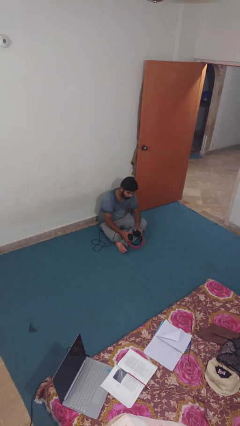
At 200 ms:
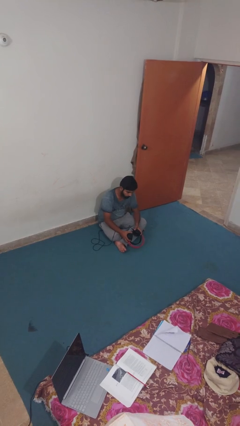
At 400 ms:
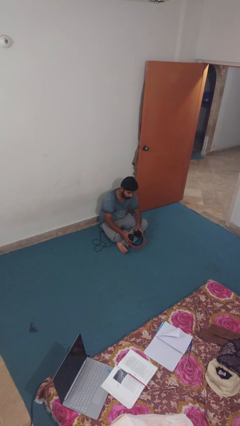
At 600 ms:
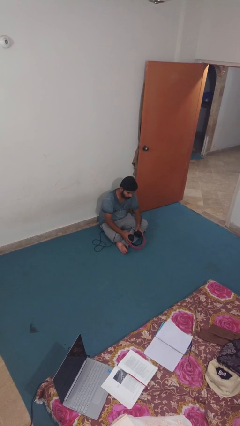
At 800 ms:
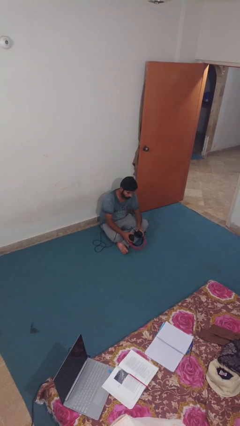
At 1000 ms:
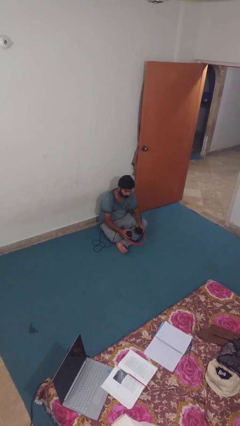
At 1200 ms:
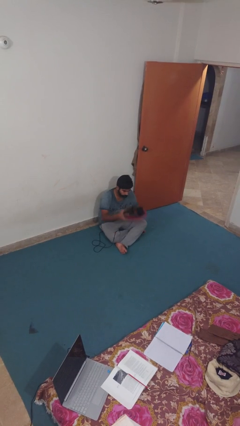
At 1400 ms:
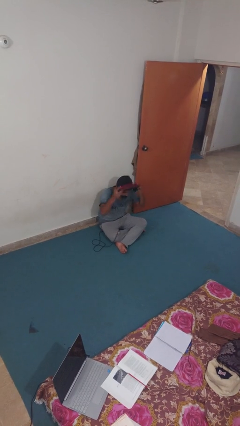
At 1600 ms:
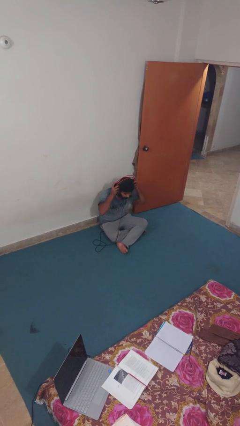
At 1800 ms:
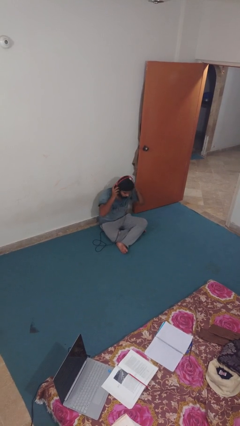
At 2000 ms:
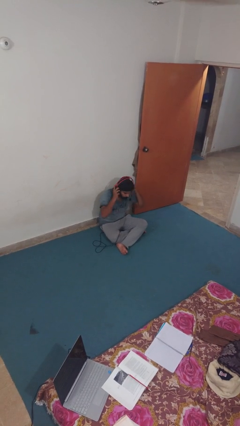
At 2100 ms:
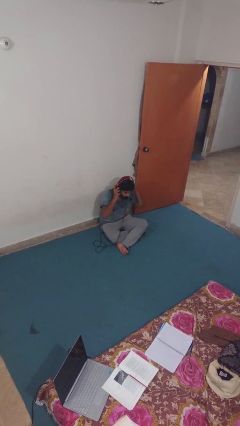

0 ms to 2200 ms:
person puts on headphones

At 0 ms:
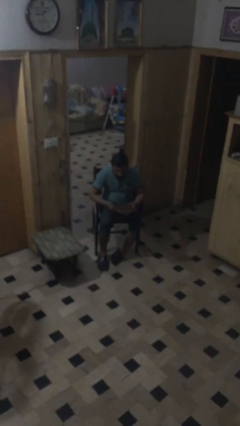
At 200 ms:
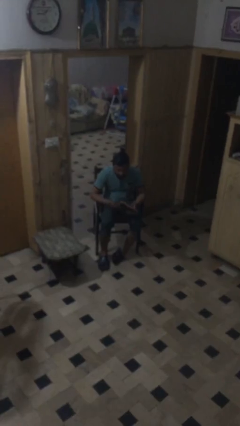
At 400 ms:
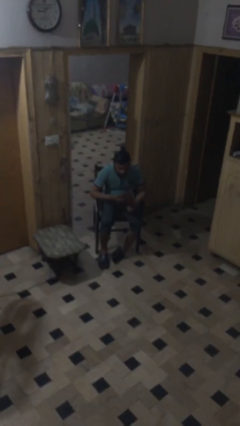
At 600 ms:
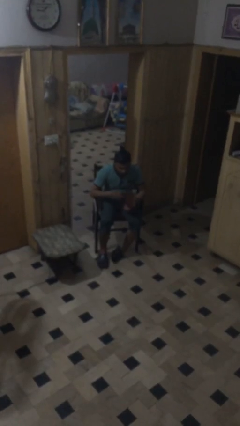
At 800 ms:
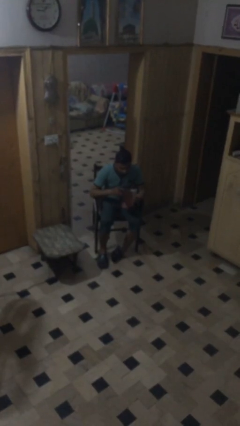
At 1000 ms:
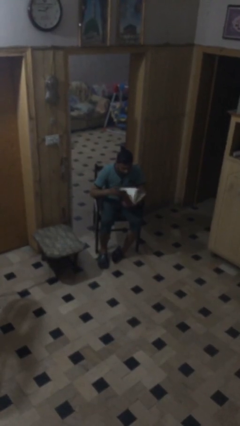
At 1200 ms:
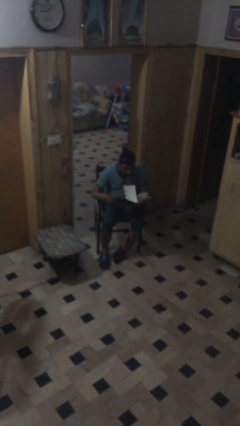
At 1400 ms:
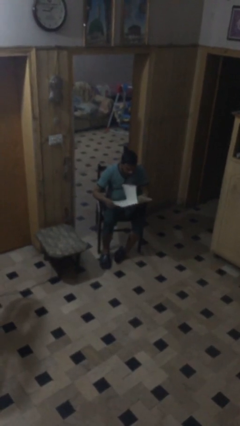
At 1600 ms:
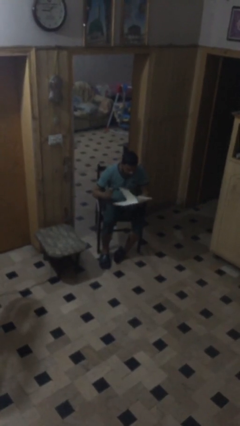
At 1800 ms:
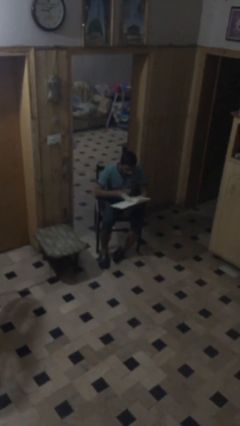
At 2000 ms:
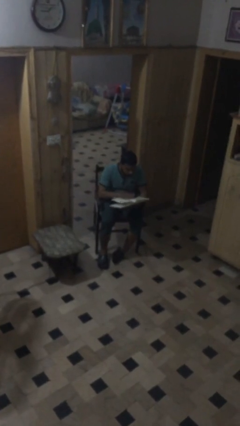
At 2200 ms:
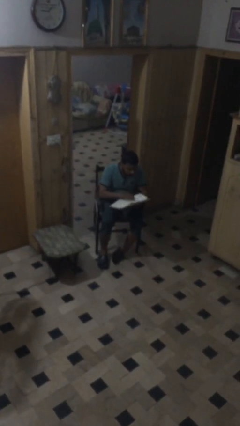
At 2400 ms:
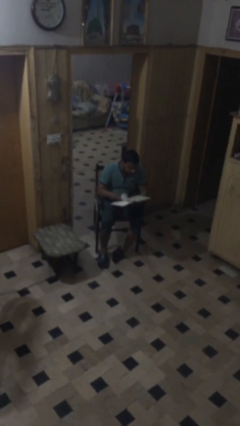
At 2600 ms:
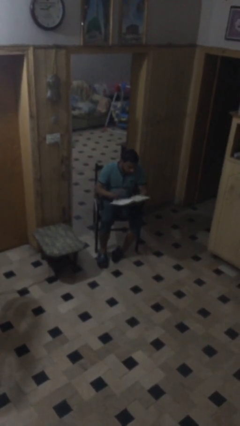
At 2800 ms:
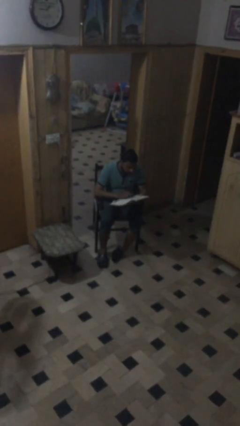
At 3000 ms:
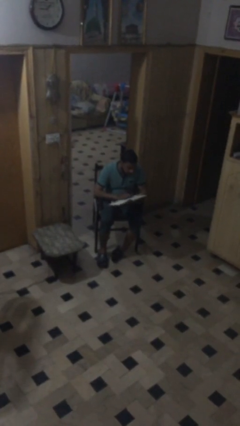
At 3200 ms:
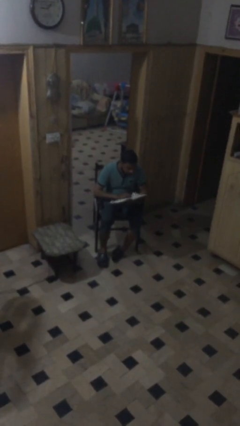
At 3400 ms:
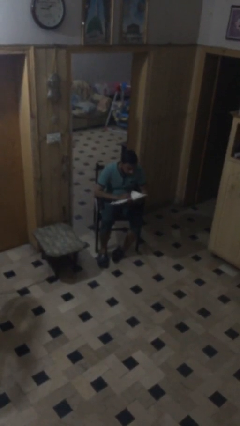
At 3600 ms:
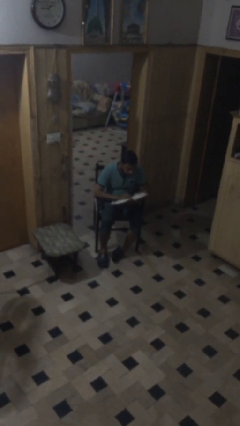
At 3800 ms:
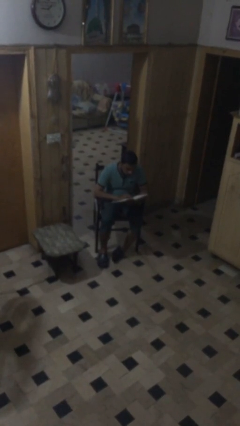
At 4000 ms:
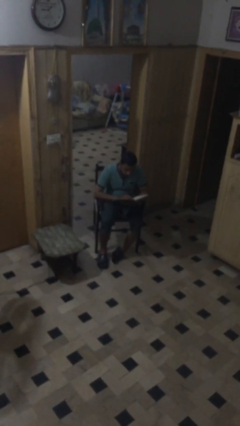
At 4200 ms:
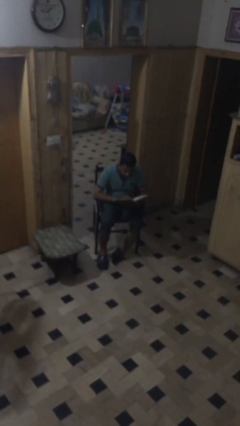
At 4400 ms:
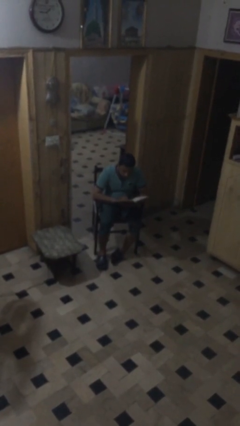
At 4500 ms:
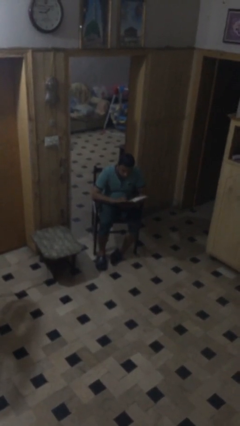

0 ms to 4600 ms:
person reads document

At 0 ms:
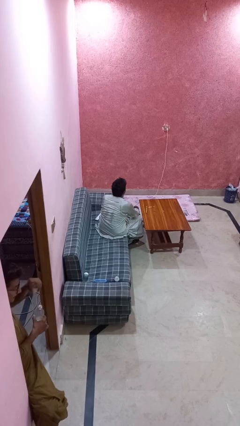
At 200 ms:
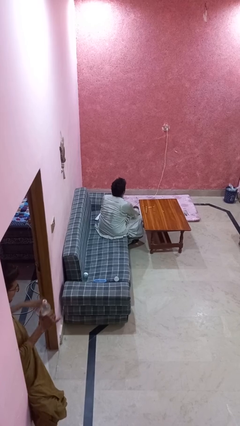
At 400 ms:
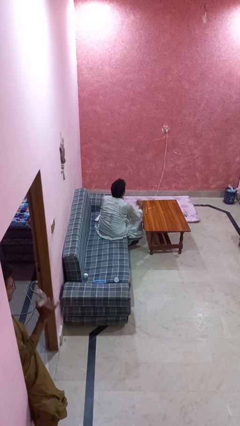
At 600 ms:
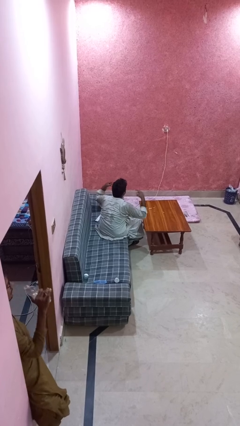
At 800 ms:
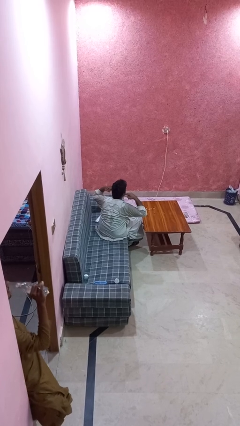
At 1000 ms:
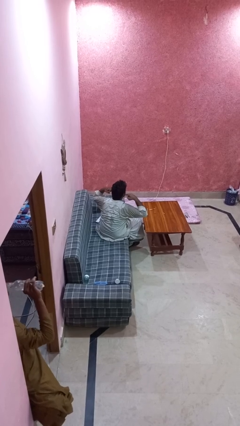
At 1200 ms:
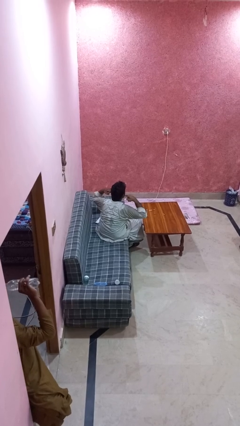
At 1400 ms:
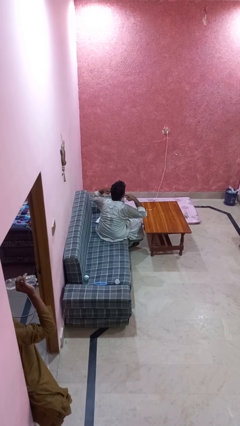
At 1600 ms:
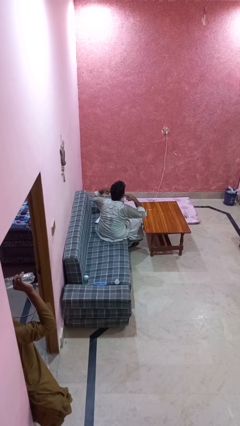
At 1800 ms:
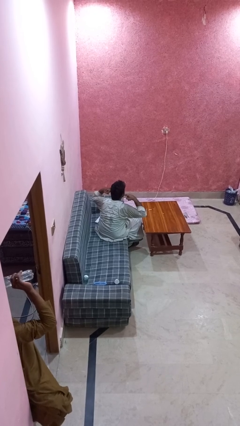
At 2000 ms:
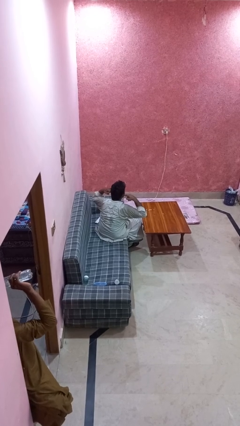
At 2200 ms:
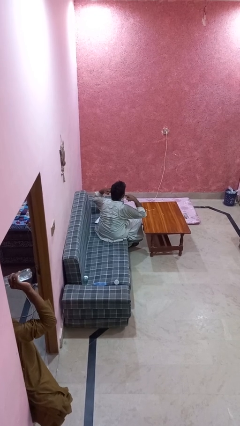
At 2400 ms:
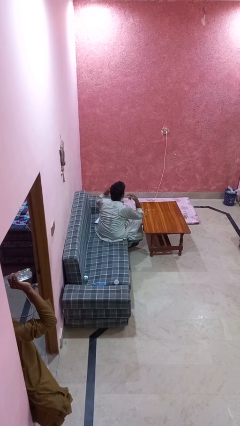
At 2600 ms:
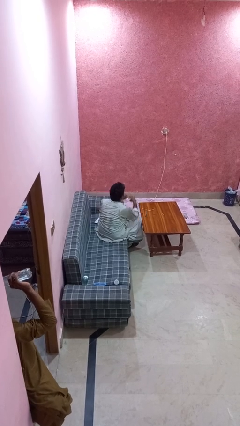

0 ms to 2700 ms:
person puts fingers in ear

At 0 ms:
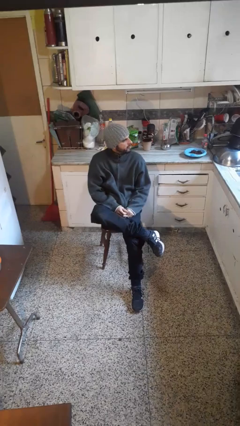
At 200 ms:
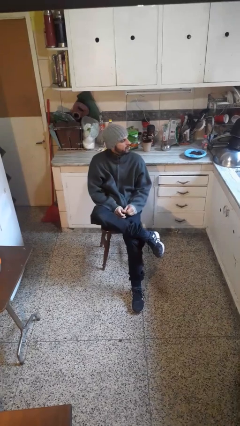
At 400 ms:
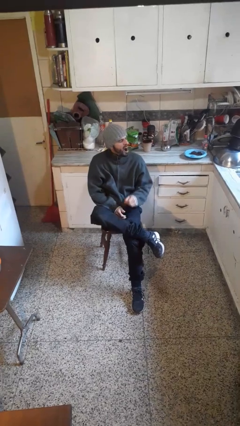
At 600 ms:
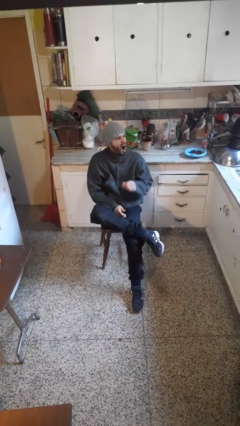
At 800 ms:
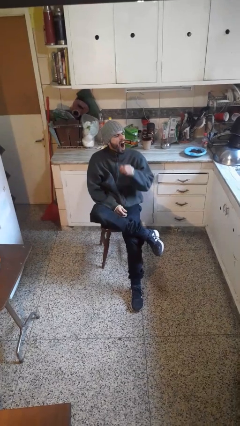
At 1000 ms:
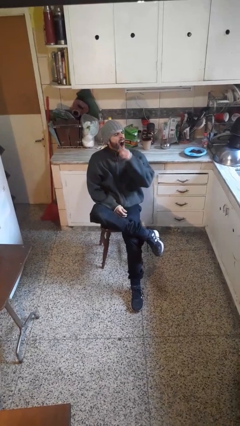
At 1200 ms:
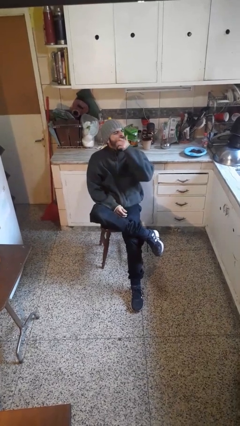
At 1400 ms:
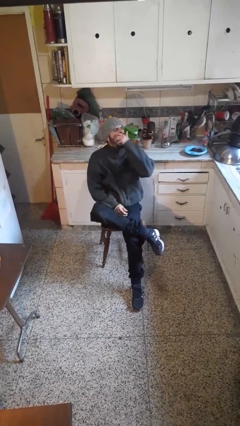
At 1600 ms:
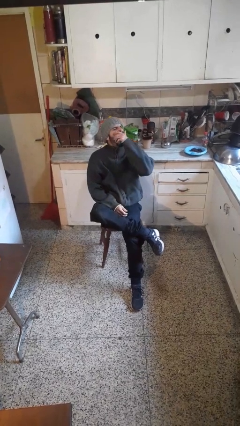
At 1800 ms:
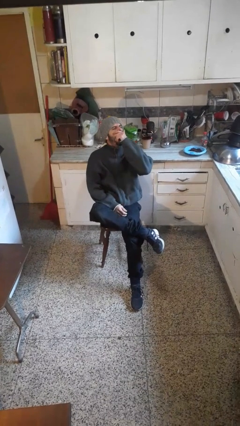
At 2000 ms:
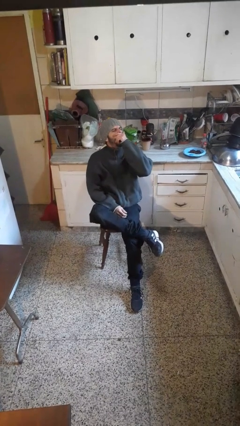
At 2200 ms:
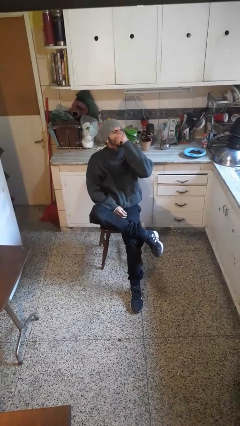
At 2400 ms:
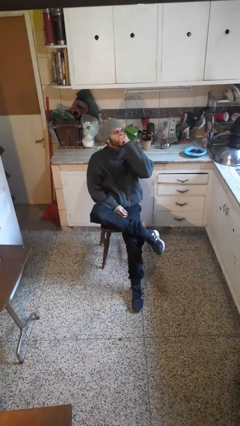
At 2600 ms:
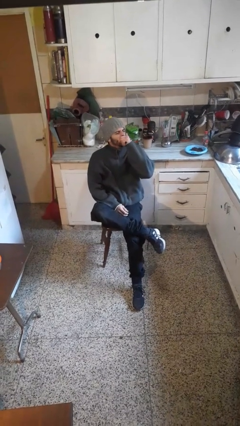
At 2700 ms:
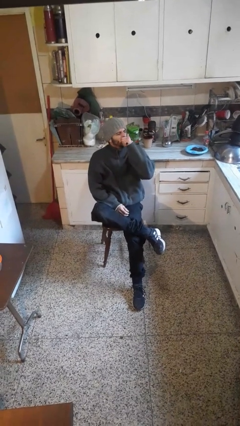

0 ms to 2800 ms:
person yawns

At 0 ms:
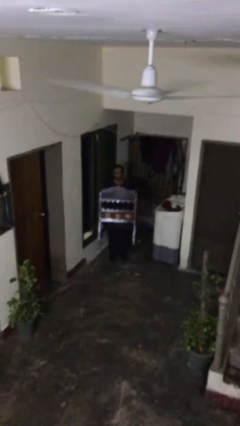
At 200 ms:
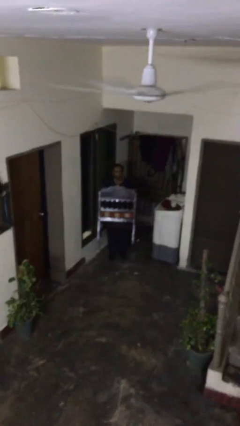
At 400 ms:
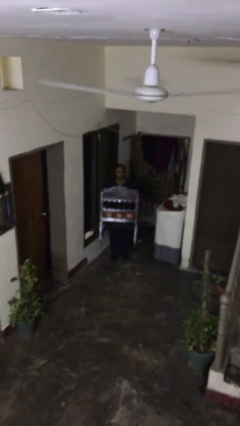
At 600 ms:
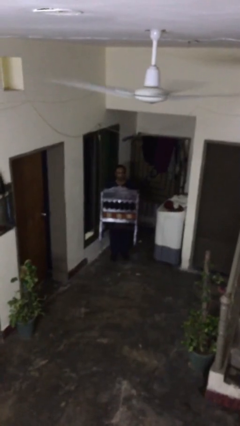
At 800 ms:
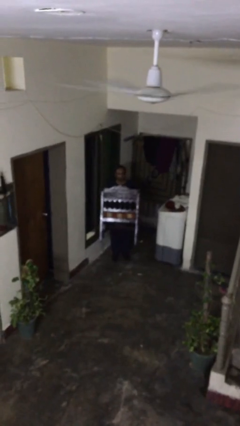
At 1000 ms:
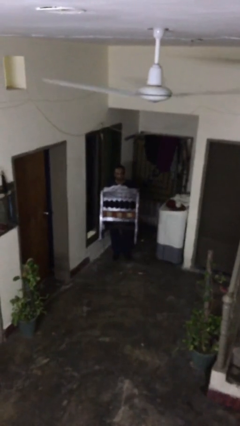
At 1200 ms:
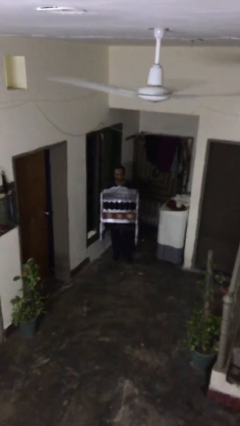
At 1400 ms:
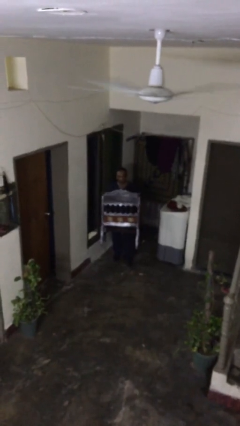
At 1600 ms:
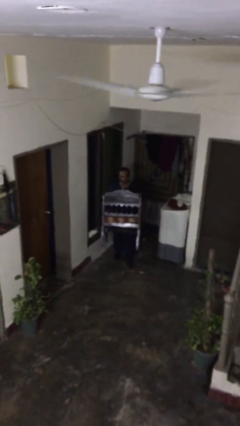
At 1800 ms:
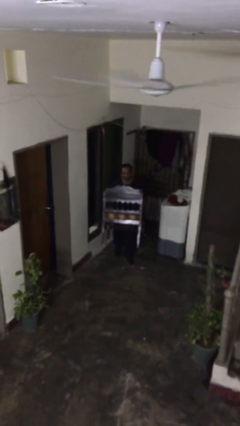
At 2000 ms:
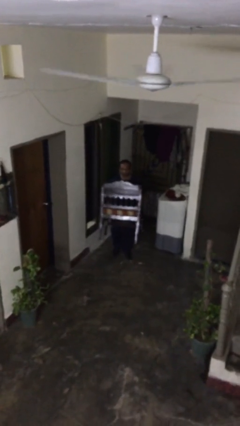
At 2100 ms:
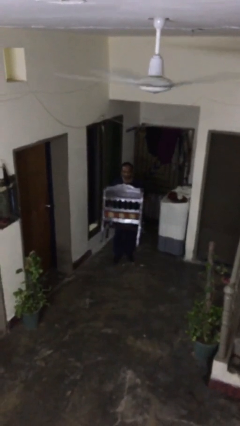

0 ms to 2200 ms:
person carries heavy object

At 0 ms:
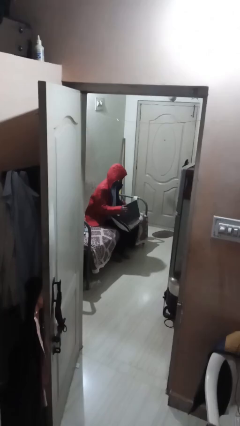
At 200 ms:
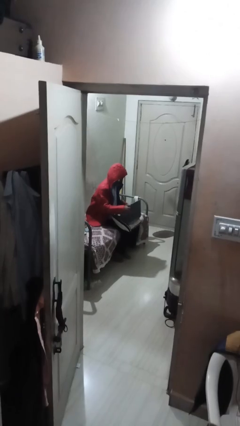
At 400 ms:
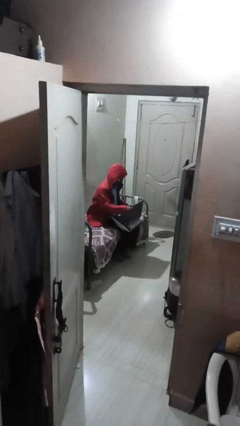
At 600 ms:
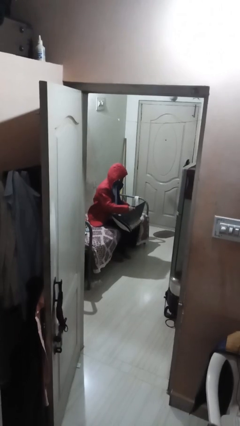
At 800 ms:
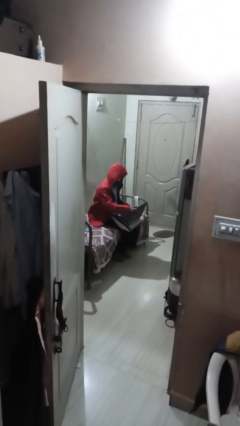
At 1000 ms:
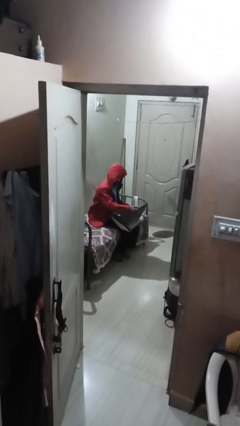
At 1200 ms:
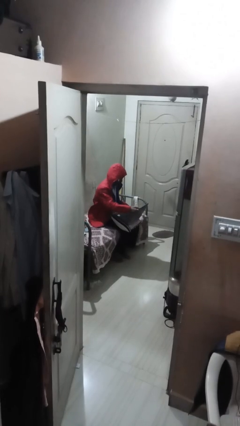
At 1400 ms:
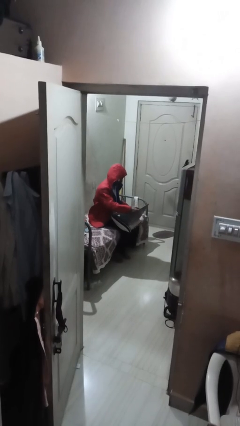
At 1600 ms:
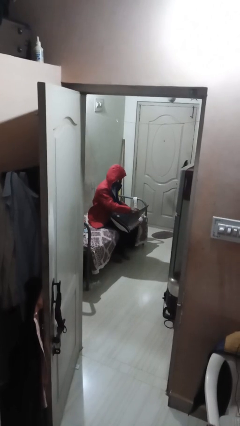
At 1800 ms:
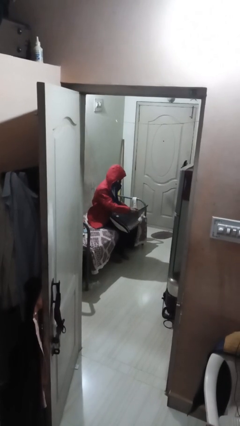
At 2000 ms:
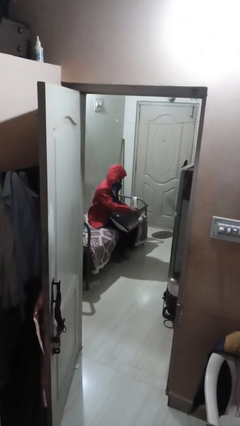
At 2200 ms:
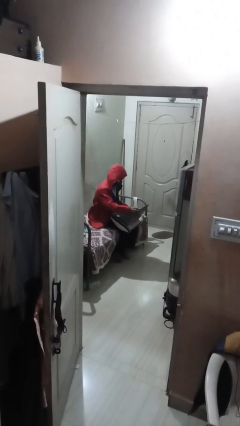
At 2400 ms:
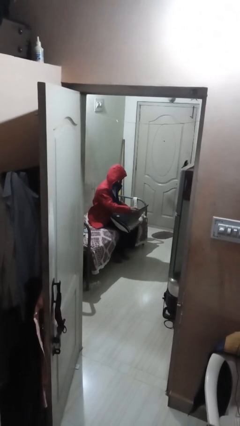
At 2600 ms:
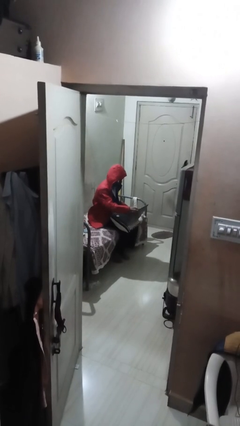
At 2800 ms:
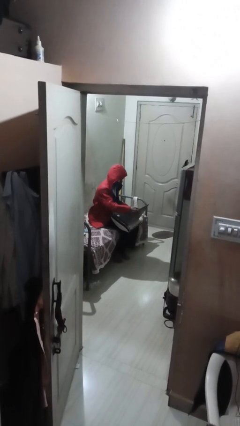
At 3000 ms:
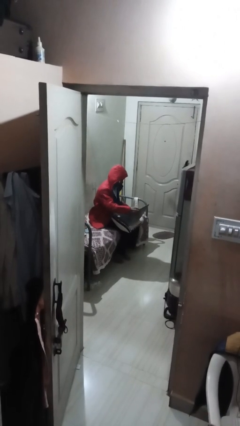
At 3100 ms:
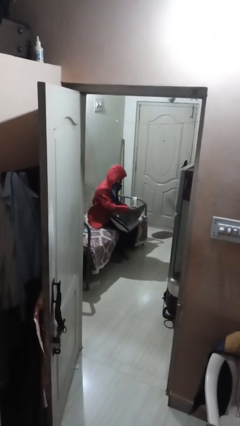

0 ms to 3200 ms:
person interacts with laptop
